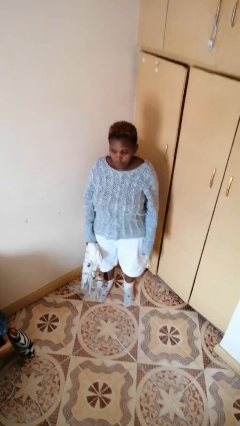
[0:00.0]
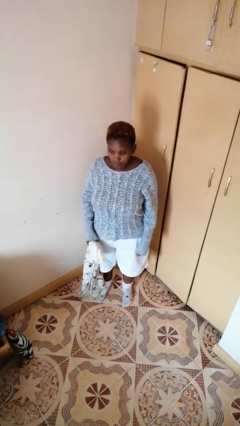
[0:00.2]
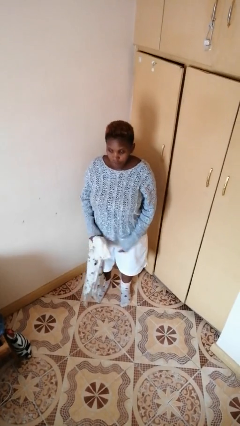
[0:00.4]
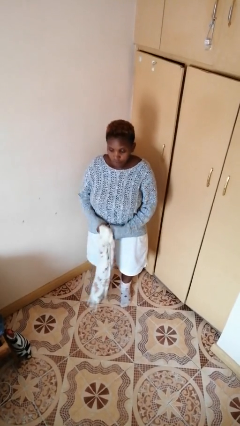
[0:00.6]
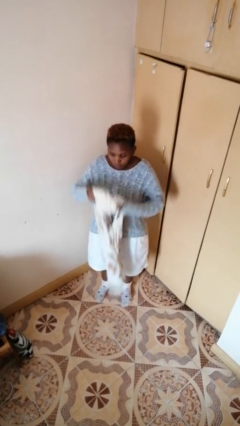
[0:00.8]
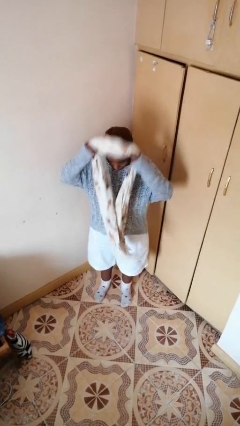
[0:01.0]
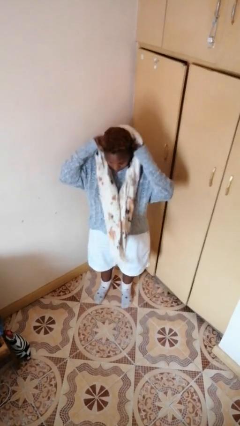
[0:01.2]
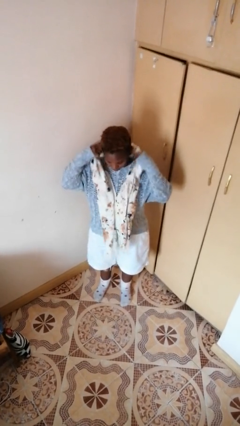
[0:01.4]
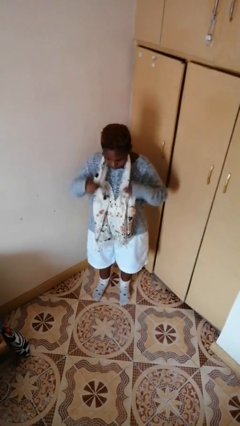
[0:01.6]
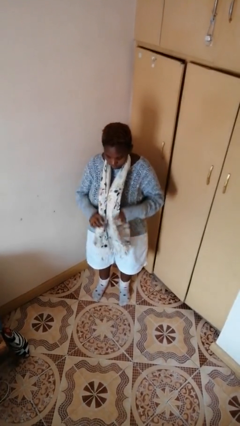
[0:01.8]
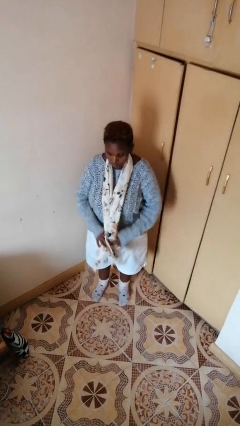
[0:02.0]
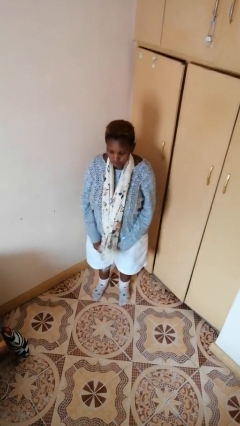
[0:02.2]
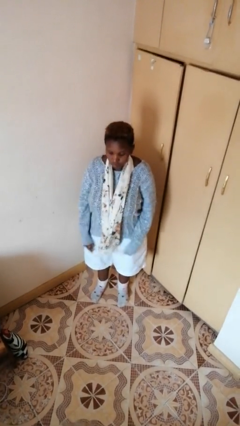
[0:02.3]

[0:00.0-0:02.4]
person puts on scarf

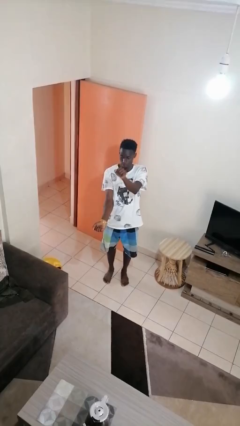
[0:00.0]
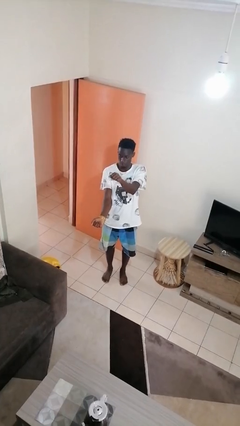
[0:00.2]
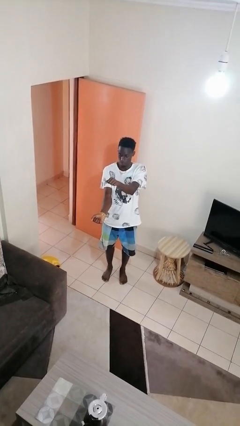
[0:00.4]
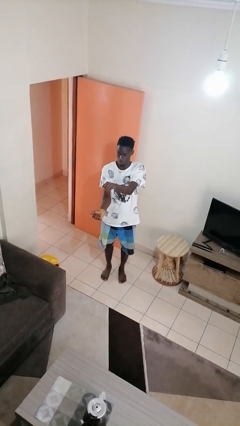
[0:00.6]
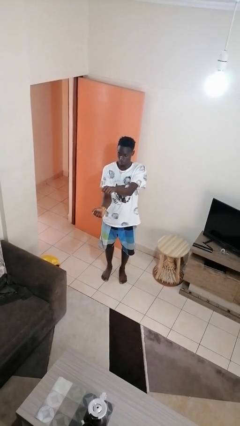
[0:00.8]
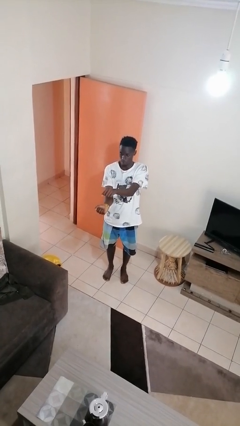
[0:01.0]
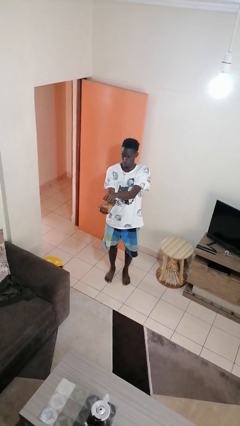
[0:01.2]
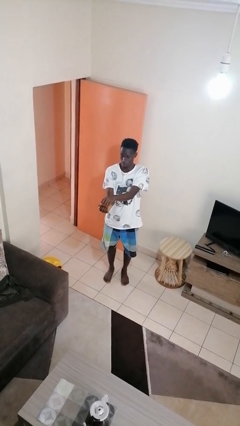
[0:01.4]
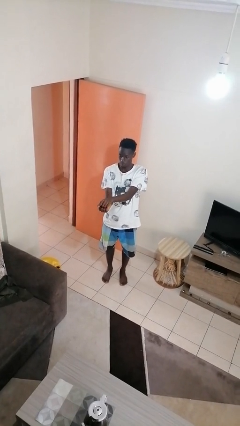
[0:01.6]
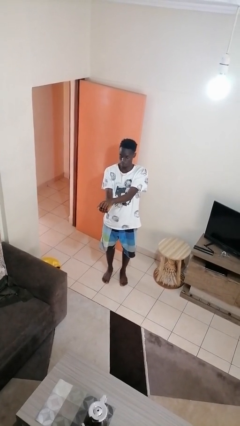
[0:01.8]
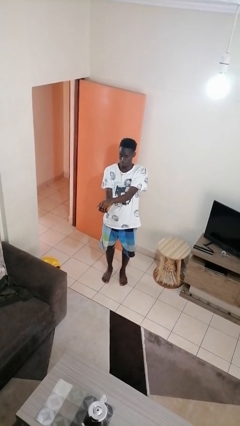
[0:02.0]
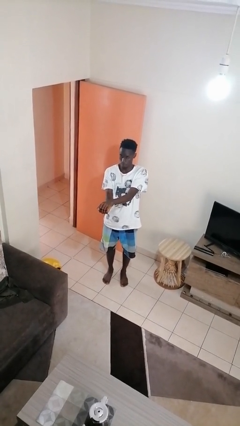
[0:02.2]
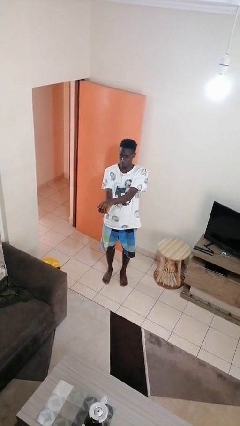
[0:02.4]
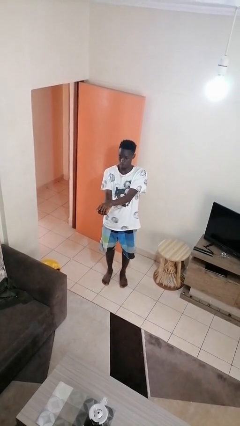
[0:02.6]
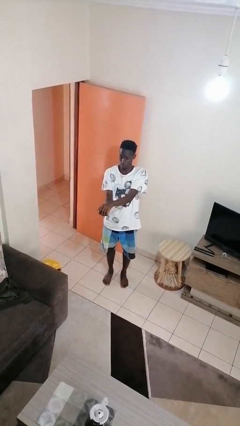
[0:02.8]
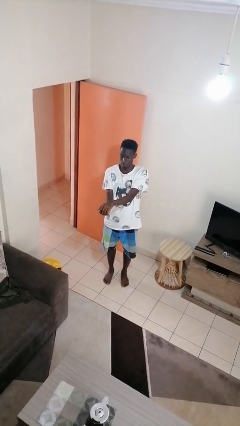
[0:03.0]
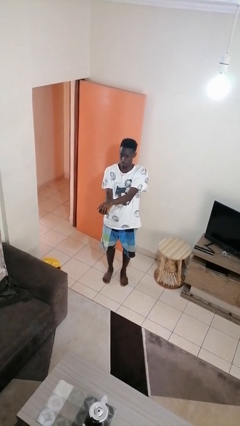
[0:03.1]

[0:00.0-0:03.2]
person gestures zoom out

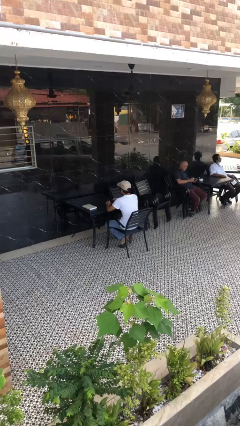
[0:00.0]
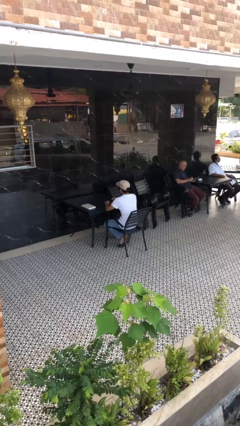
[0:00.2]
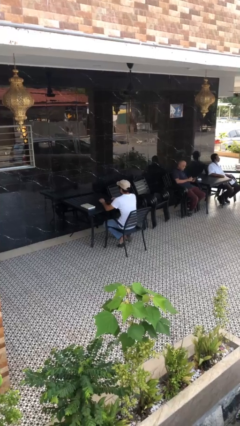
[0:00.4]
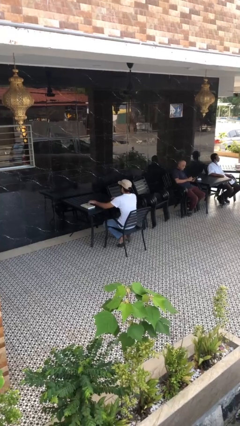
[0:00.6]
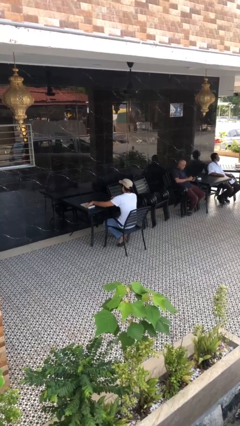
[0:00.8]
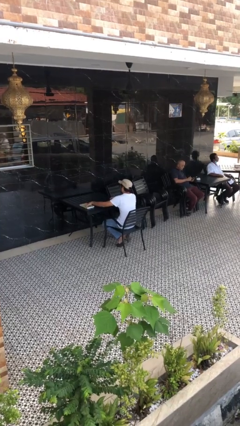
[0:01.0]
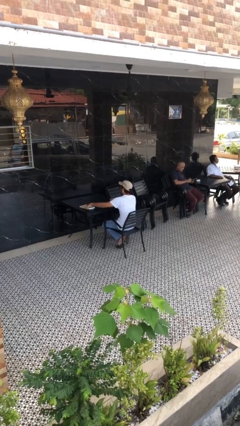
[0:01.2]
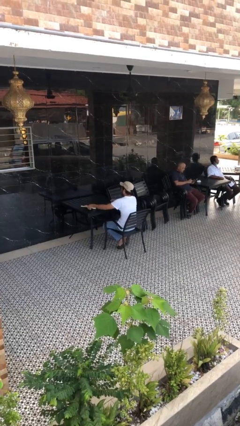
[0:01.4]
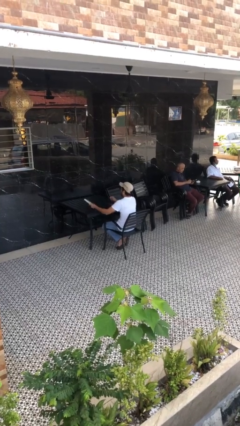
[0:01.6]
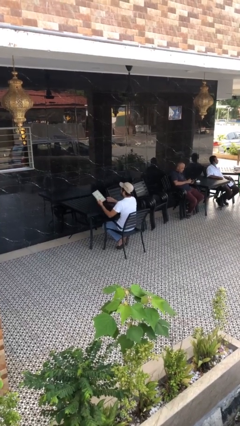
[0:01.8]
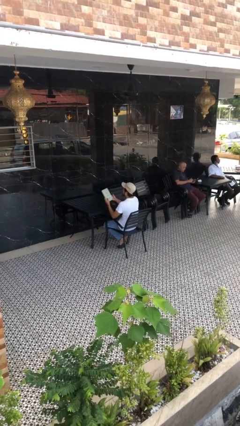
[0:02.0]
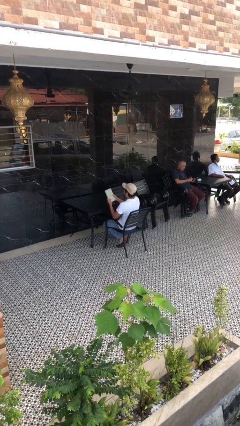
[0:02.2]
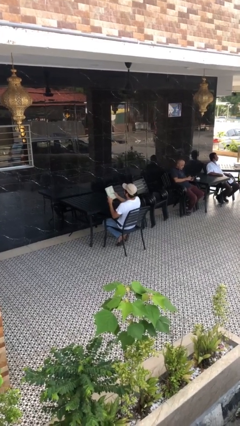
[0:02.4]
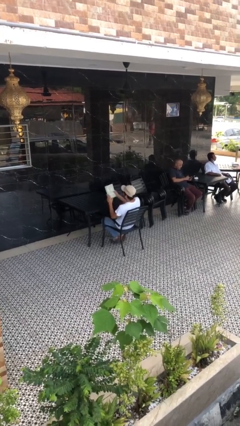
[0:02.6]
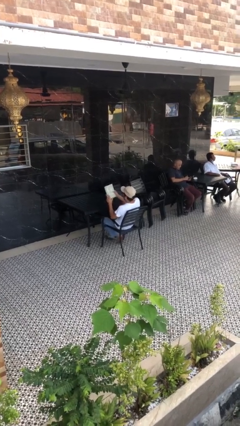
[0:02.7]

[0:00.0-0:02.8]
person picks up object from table

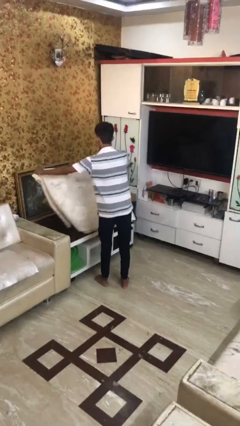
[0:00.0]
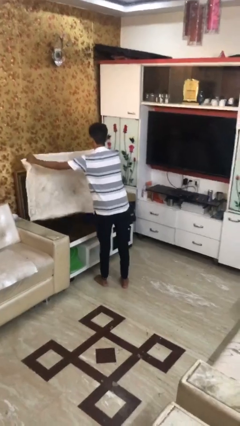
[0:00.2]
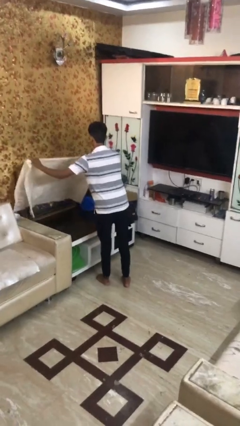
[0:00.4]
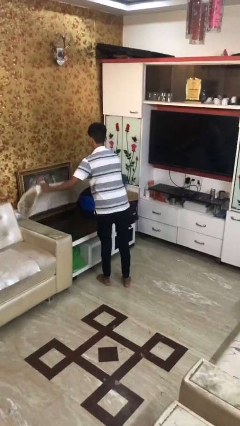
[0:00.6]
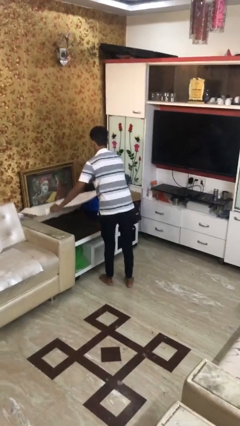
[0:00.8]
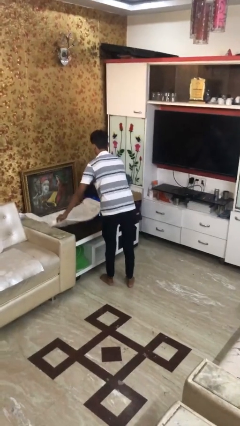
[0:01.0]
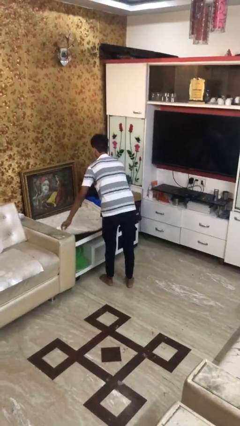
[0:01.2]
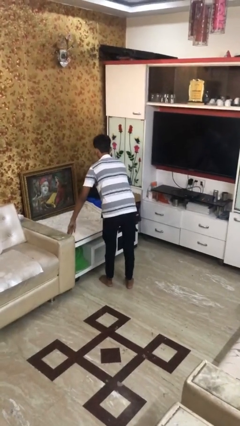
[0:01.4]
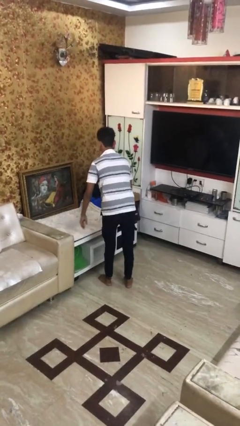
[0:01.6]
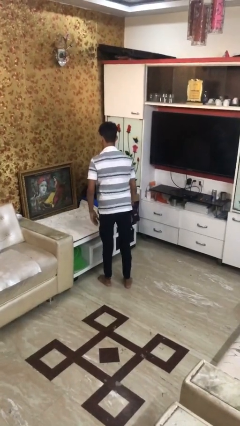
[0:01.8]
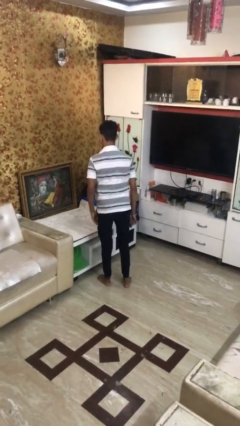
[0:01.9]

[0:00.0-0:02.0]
person spreads tablecloth

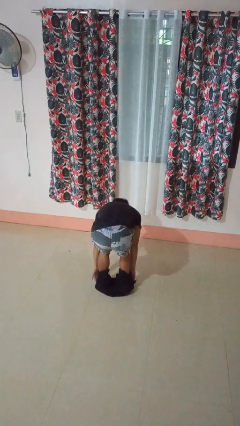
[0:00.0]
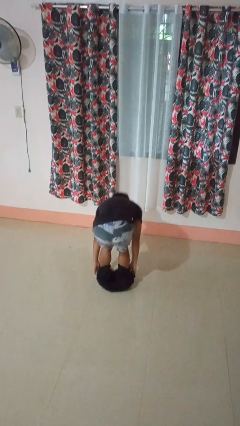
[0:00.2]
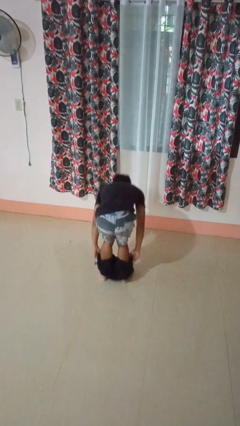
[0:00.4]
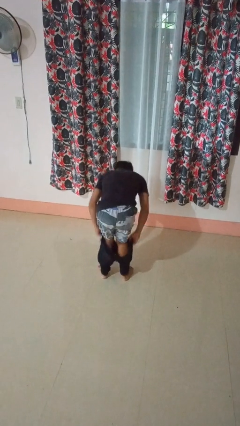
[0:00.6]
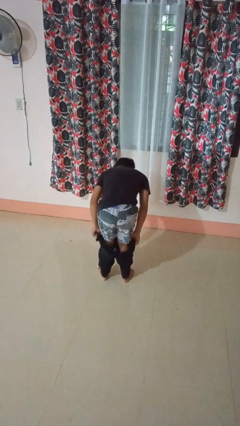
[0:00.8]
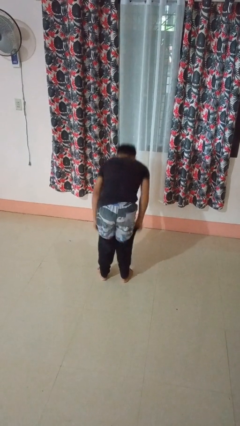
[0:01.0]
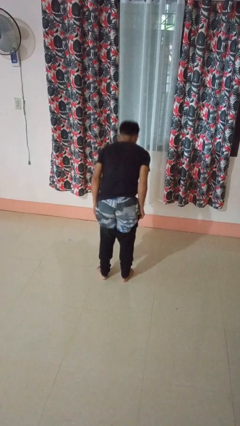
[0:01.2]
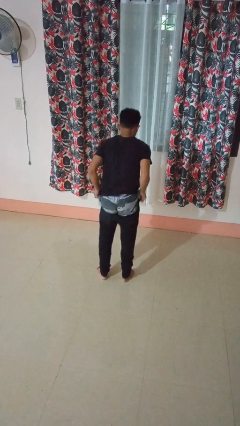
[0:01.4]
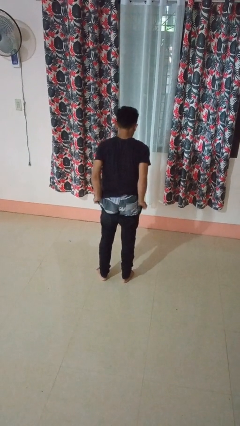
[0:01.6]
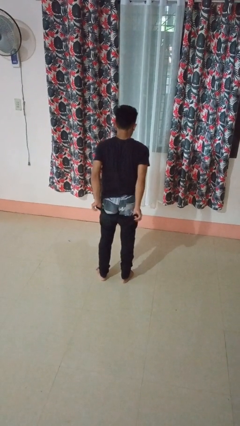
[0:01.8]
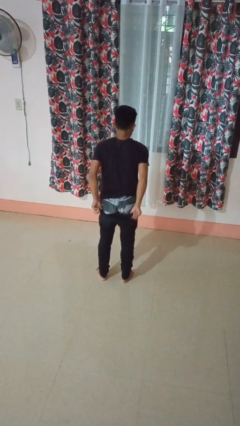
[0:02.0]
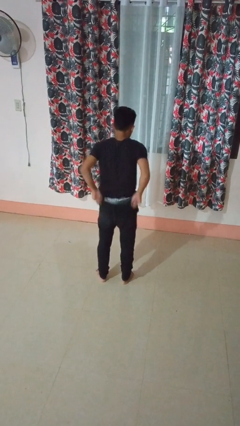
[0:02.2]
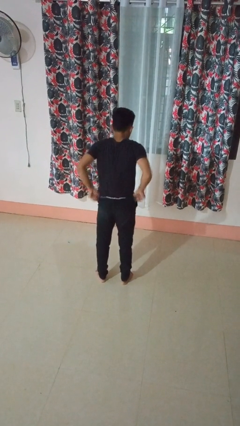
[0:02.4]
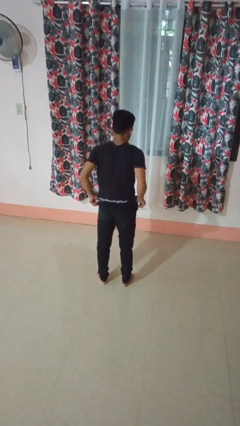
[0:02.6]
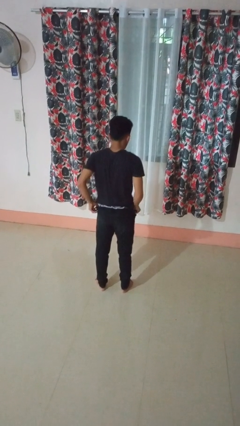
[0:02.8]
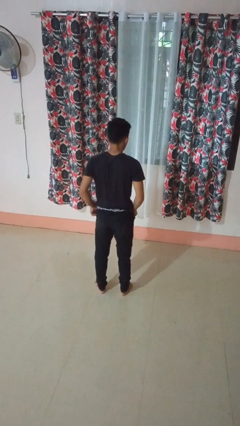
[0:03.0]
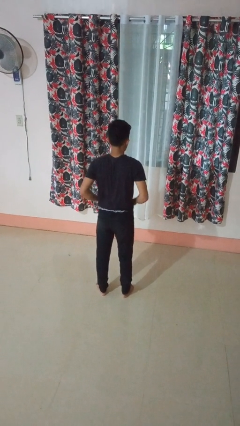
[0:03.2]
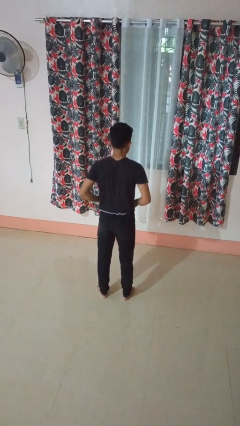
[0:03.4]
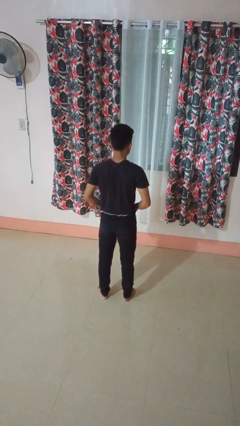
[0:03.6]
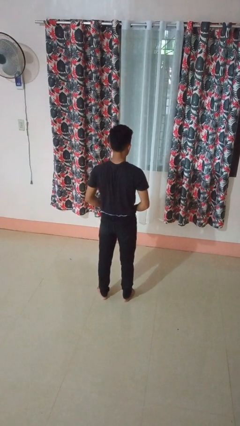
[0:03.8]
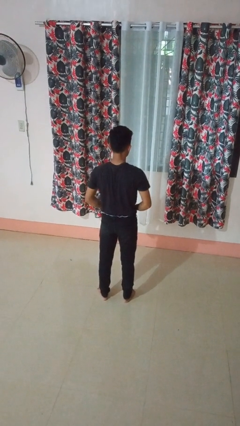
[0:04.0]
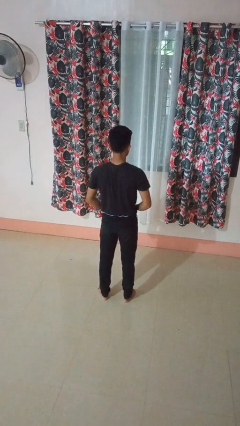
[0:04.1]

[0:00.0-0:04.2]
person puts on pants

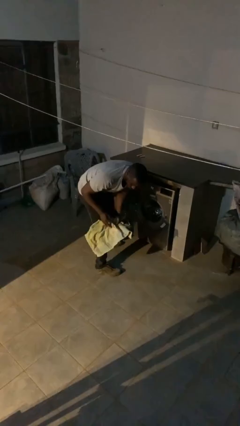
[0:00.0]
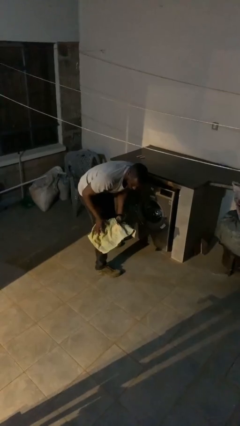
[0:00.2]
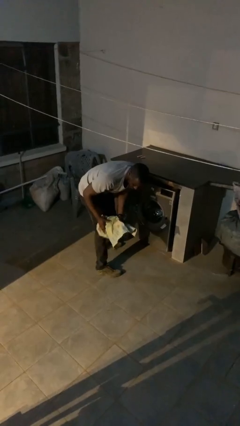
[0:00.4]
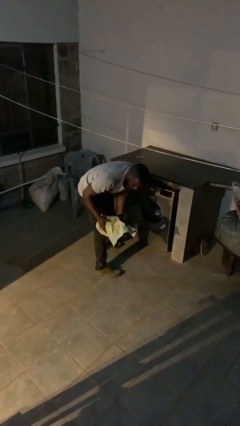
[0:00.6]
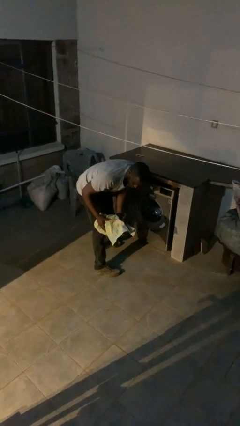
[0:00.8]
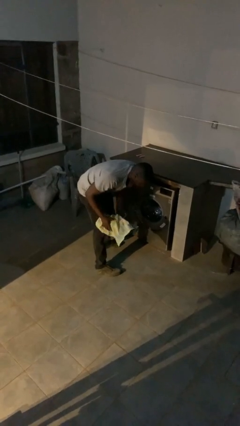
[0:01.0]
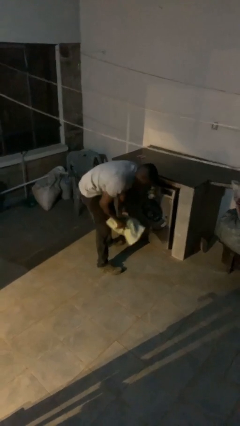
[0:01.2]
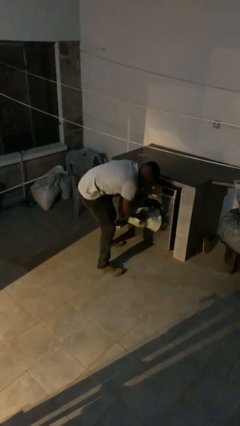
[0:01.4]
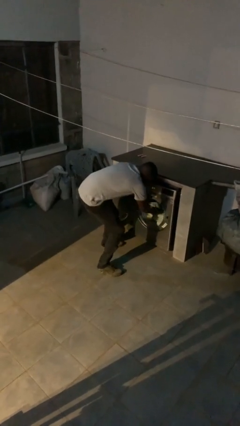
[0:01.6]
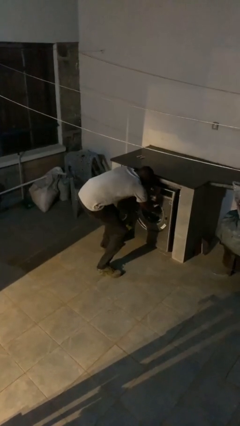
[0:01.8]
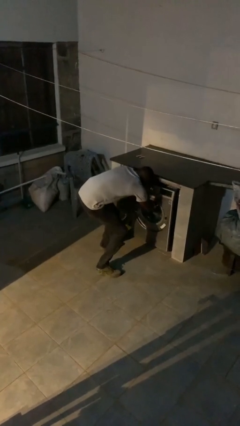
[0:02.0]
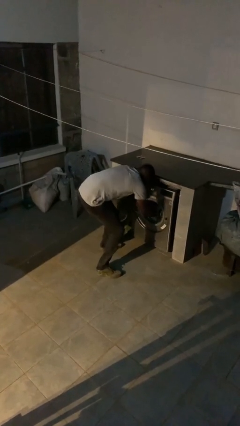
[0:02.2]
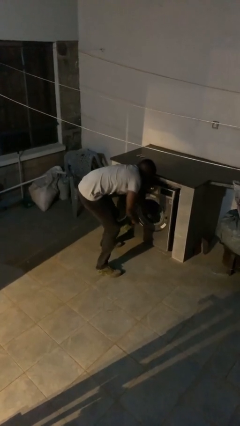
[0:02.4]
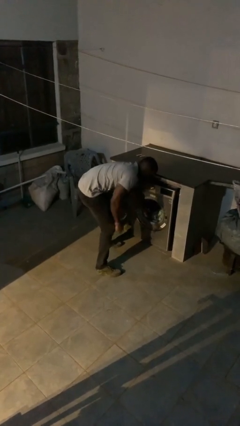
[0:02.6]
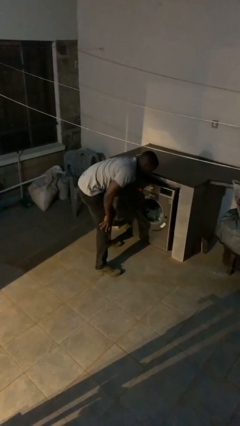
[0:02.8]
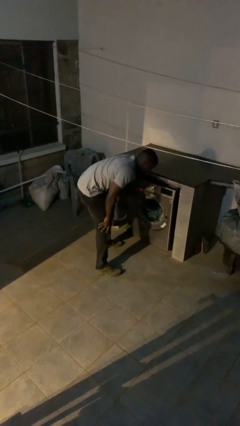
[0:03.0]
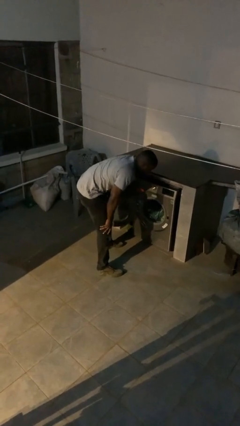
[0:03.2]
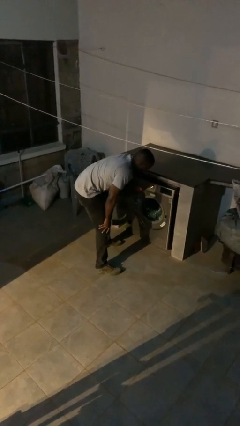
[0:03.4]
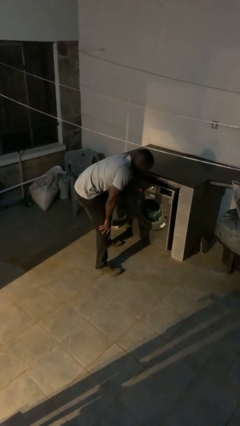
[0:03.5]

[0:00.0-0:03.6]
person loads clotheswasher
